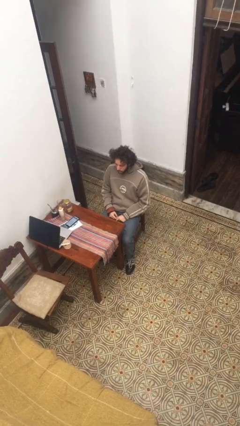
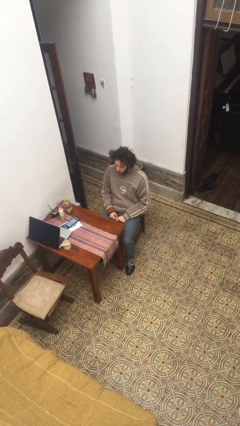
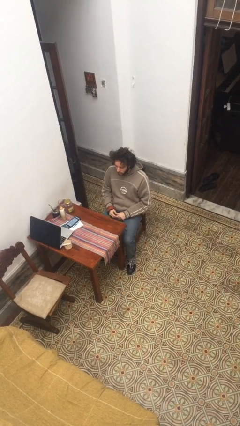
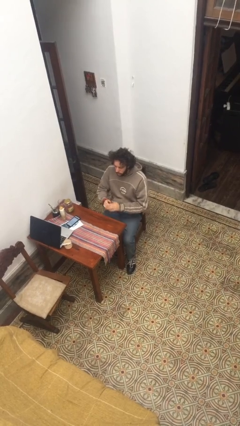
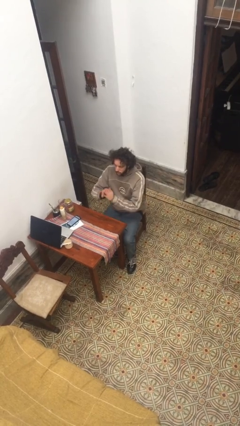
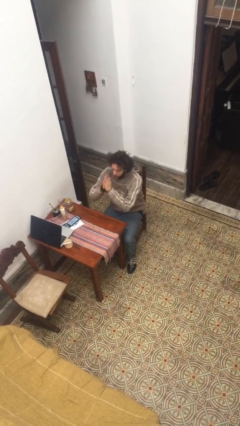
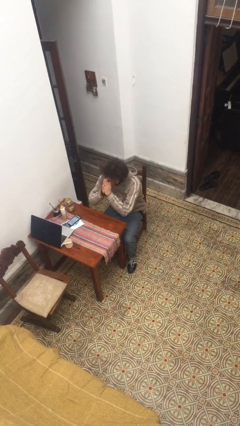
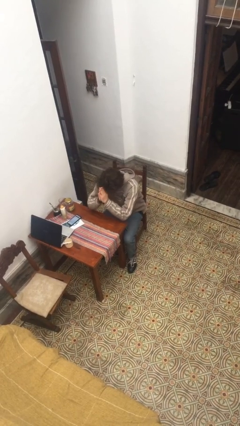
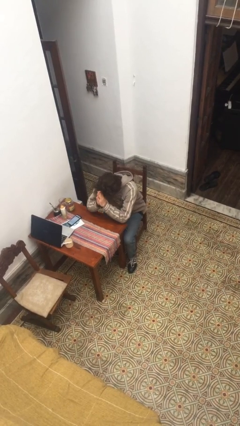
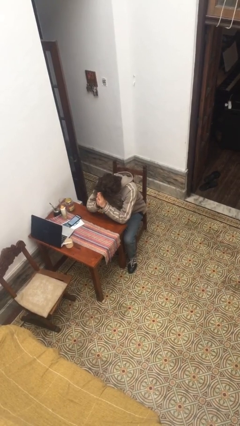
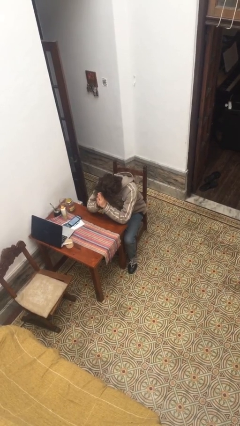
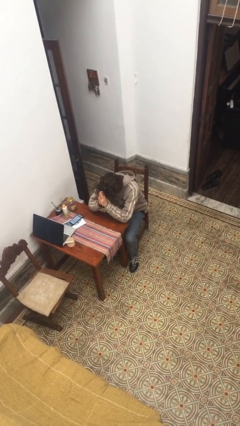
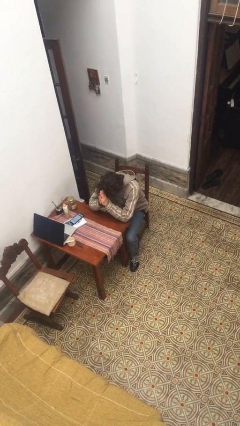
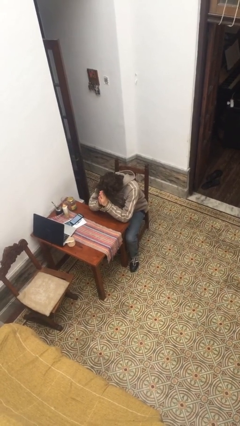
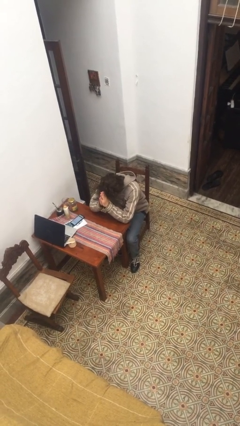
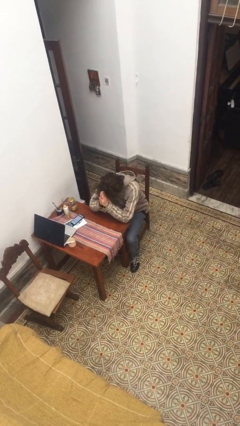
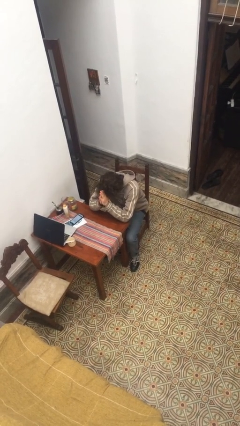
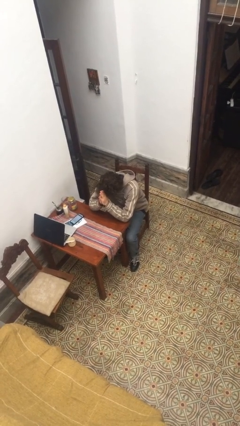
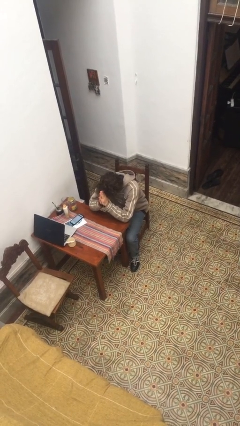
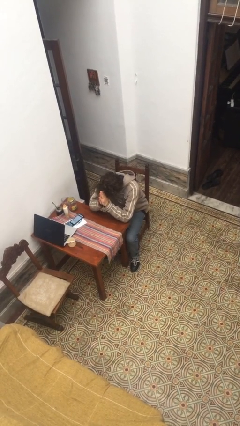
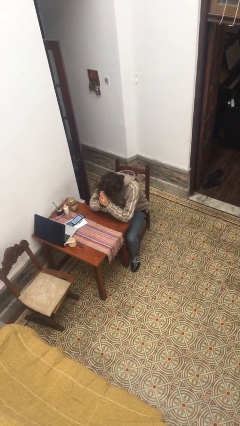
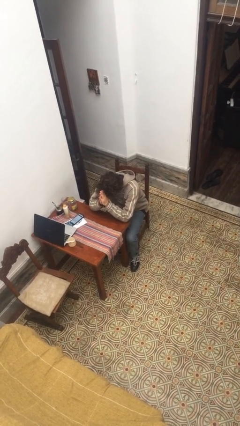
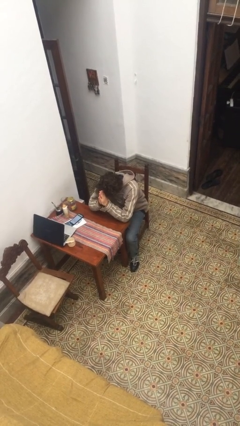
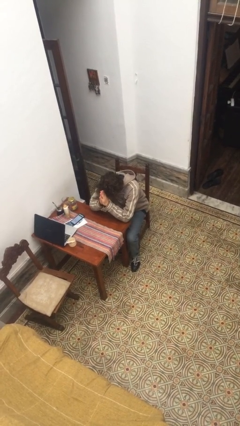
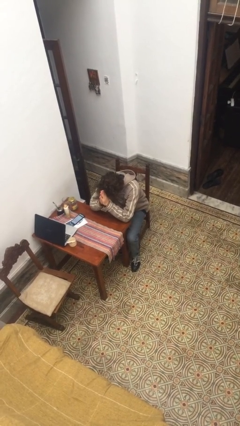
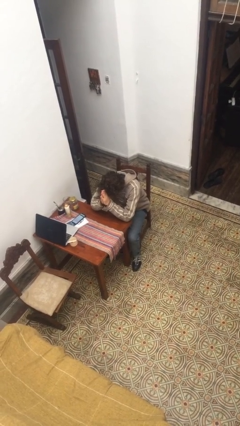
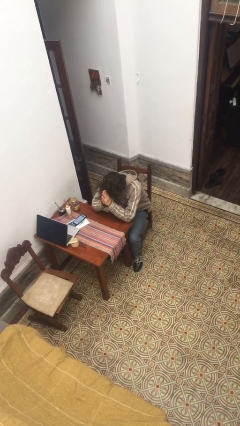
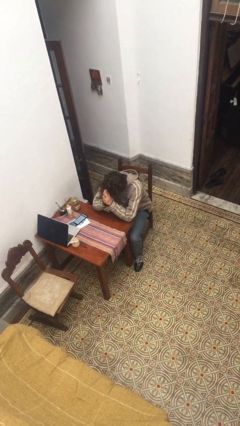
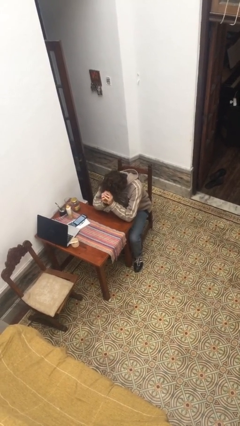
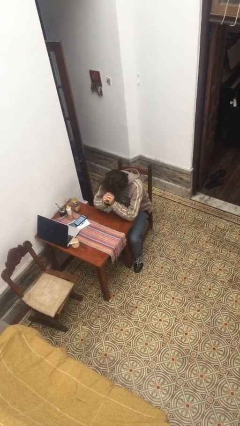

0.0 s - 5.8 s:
person prays

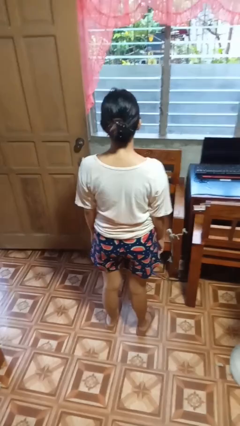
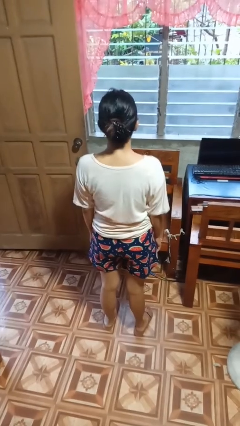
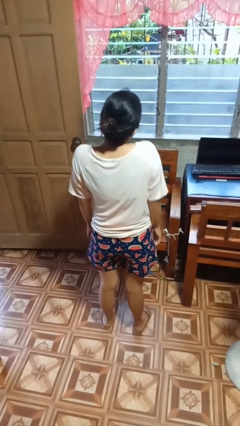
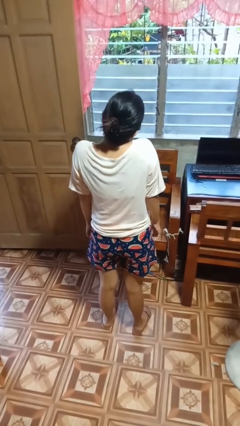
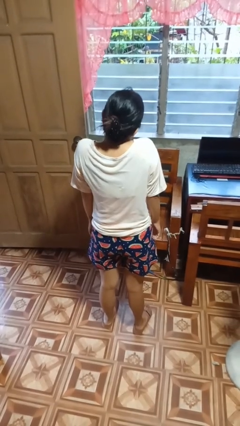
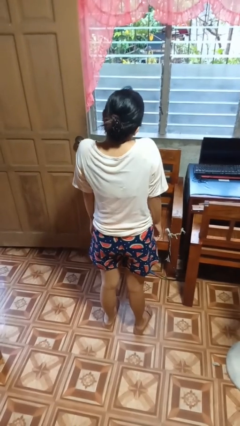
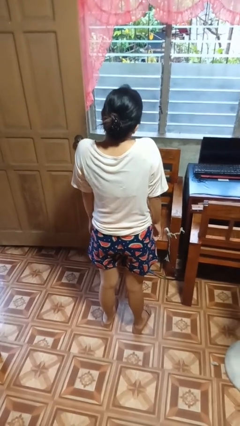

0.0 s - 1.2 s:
person shrugs

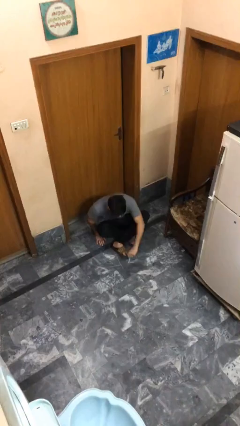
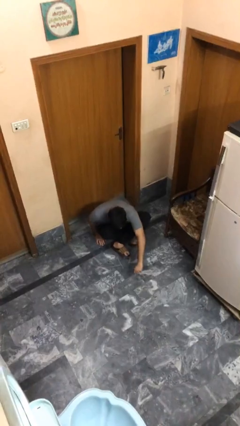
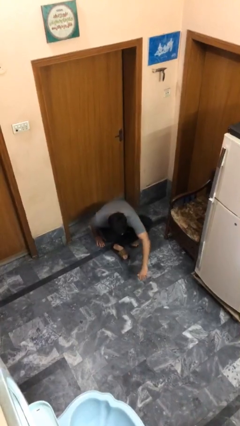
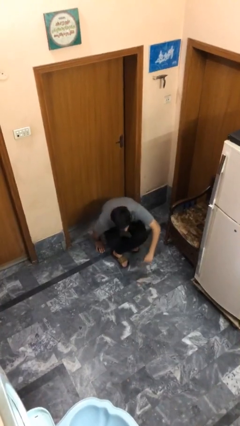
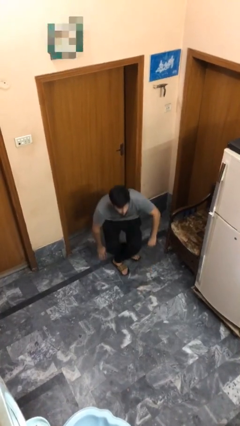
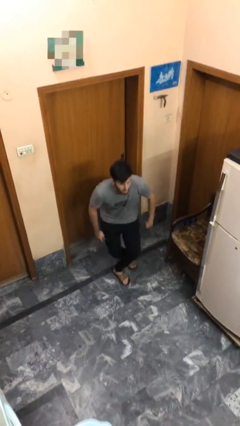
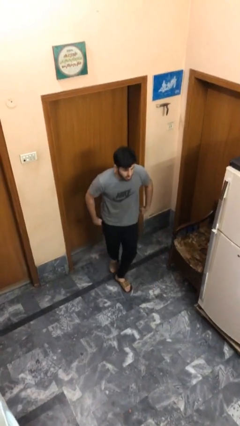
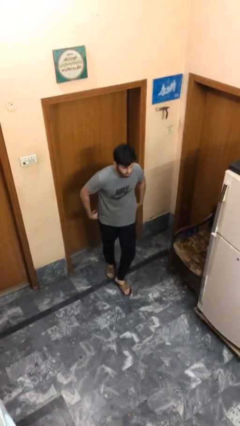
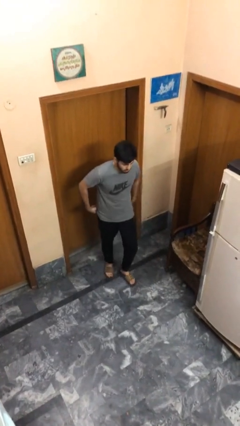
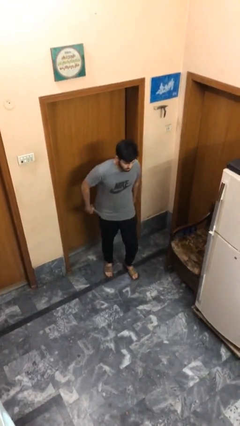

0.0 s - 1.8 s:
person stands up from floor

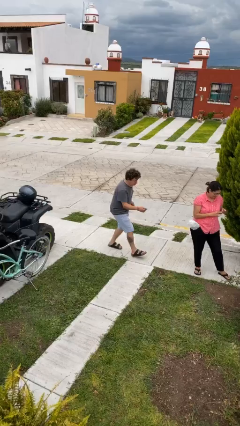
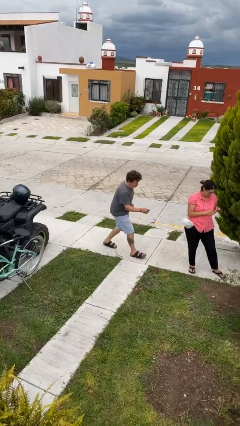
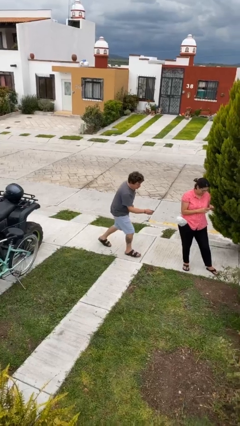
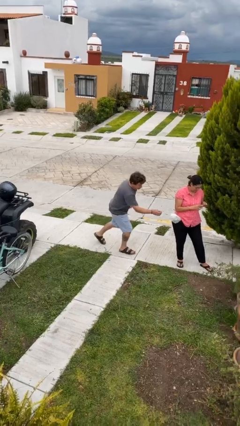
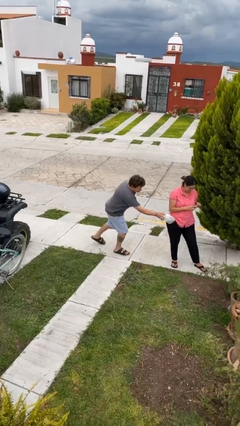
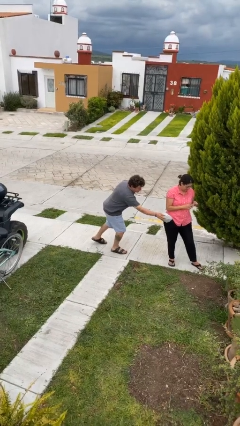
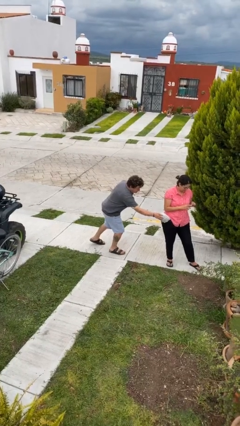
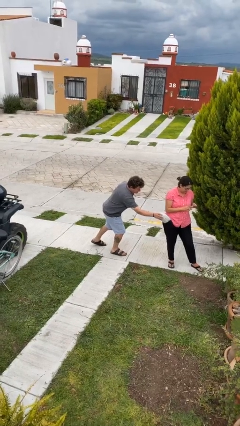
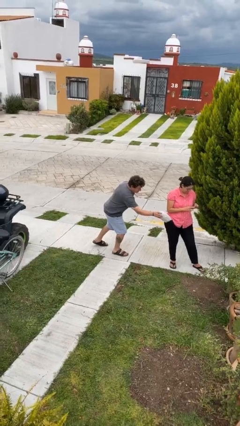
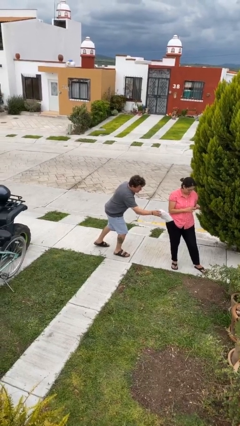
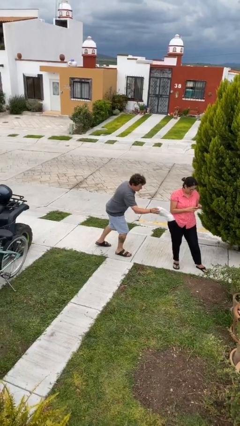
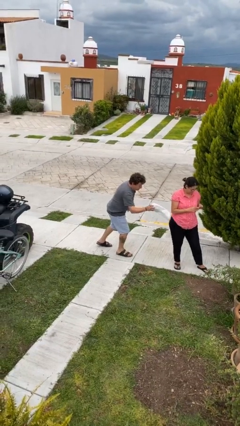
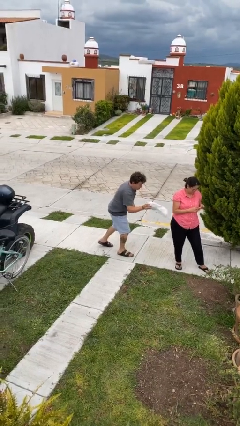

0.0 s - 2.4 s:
person steals object from person

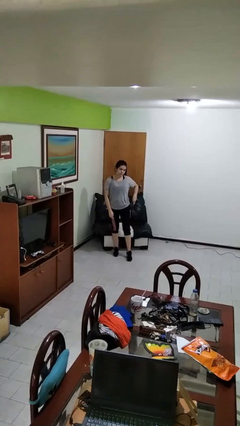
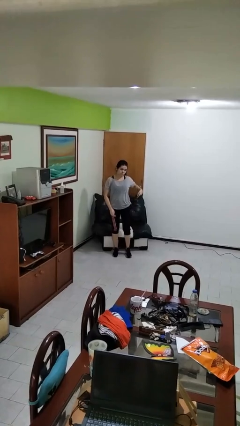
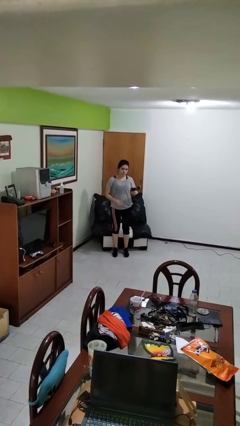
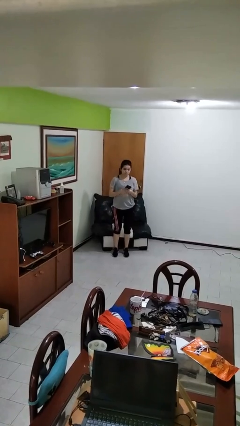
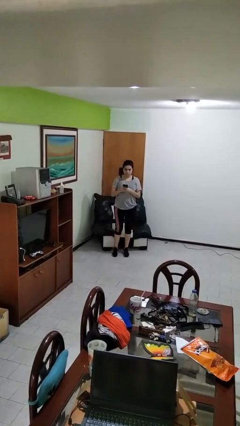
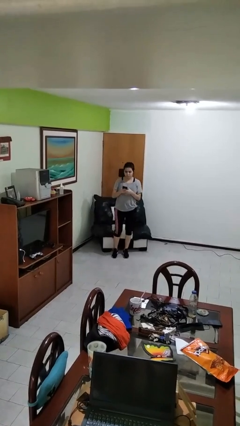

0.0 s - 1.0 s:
person takes phone from pocket

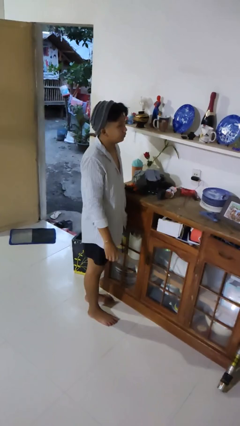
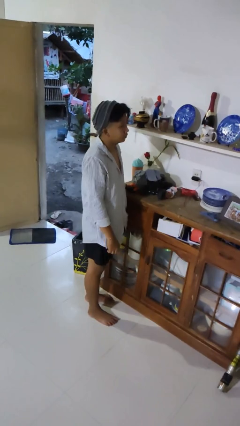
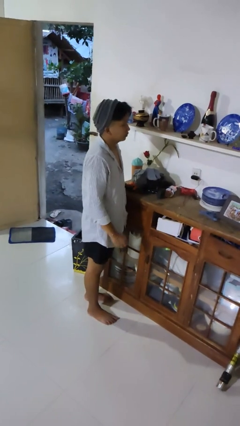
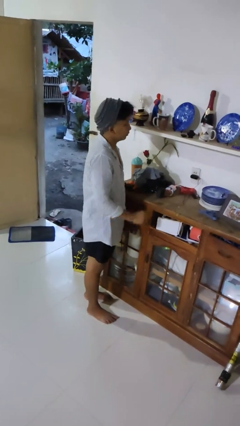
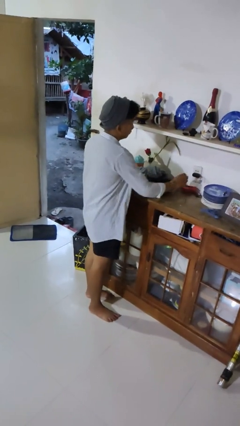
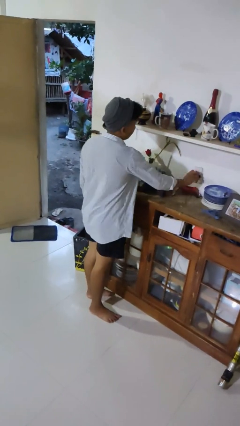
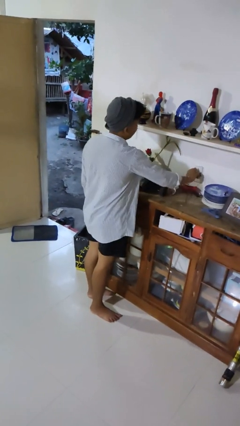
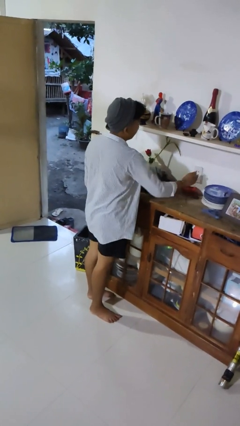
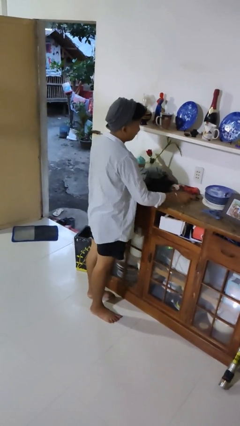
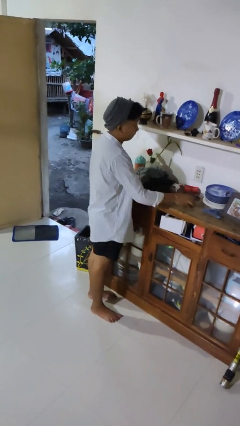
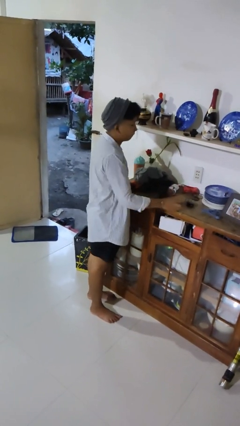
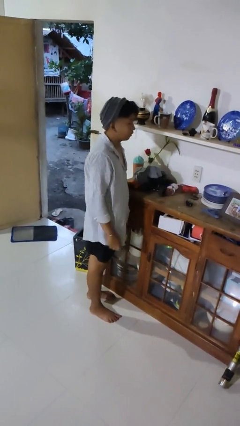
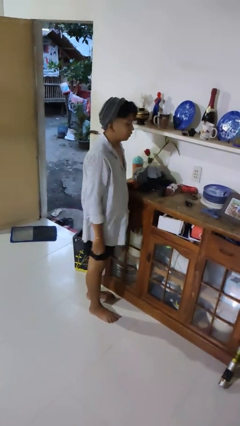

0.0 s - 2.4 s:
person unplugs from electrical socket

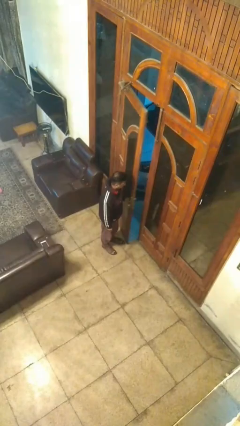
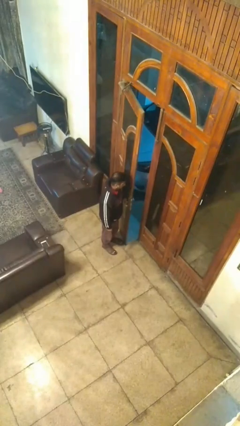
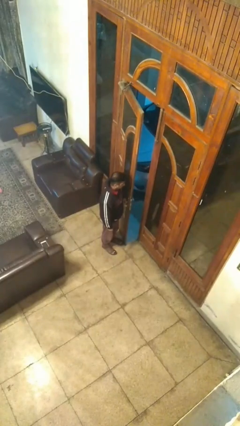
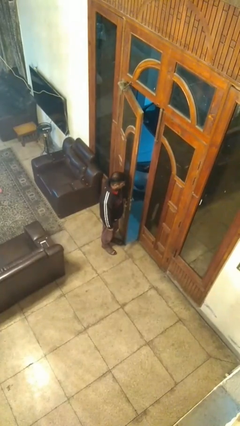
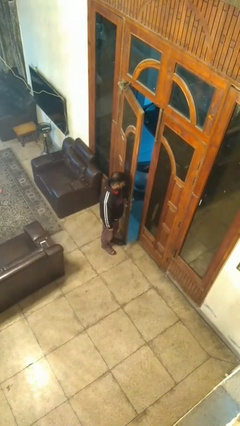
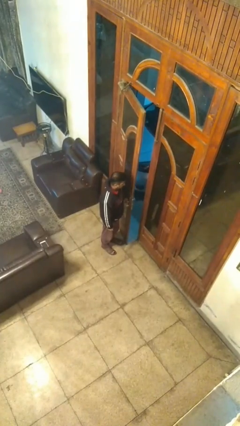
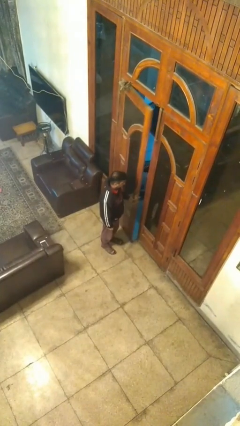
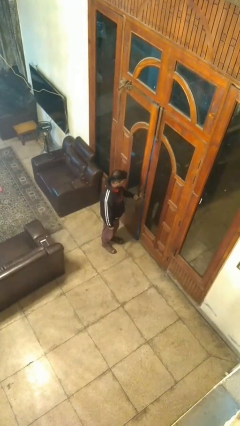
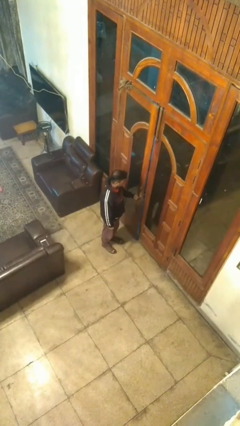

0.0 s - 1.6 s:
person closes facility door

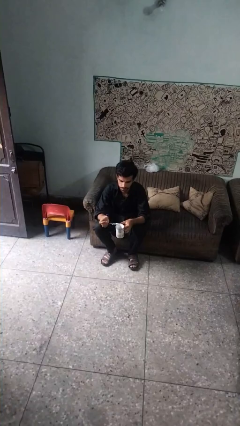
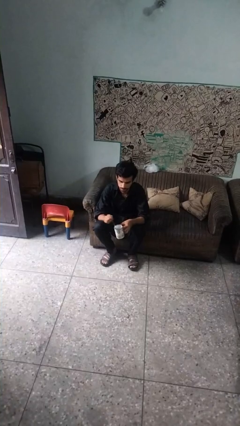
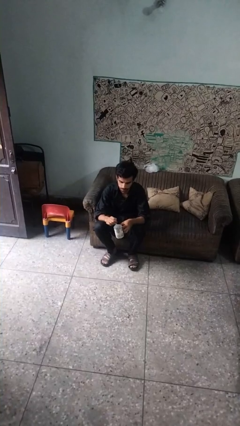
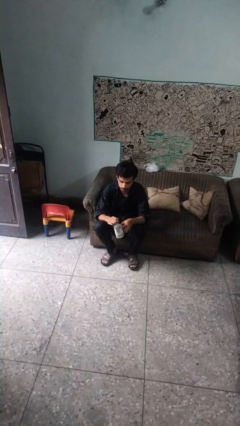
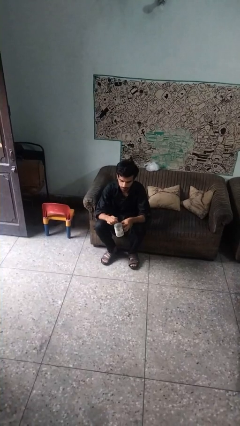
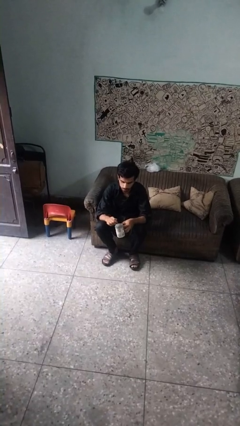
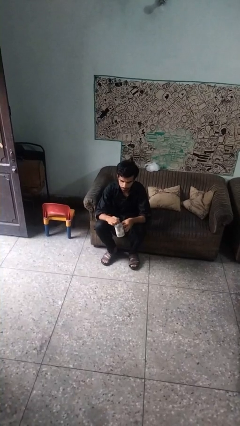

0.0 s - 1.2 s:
person stirs mug
